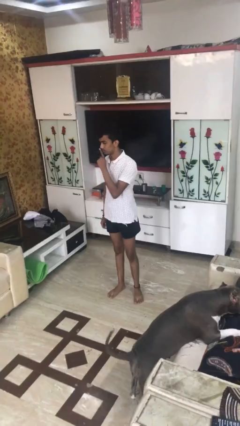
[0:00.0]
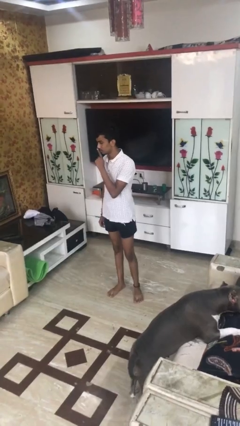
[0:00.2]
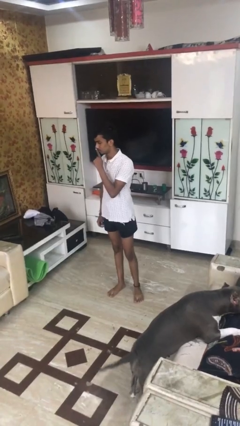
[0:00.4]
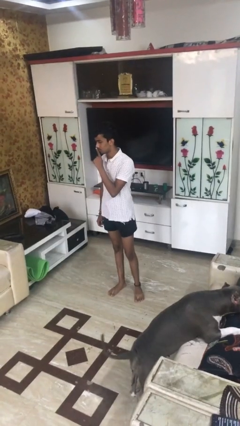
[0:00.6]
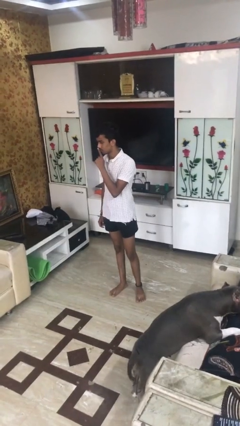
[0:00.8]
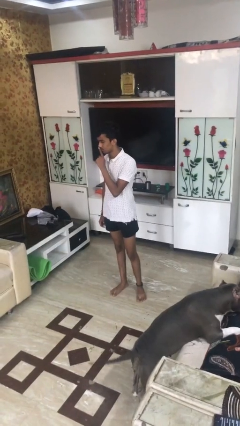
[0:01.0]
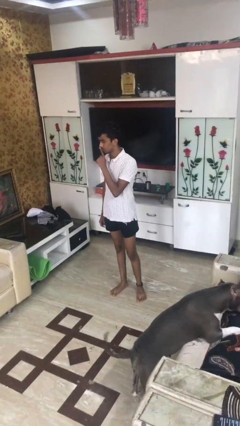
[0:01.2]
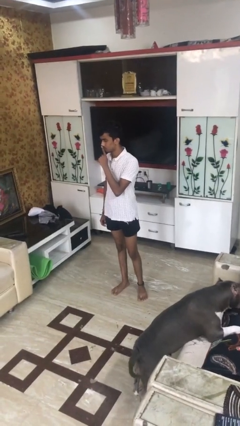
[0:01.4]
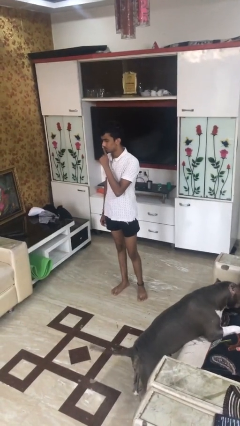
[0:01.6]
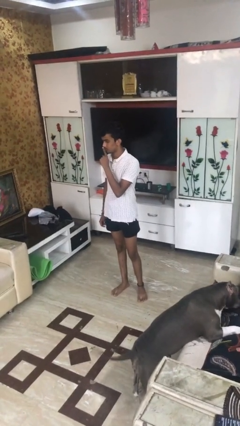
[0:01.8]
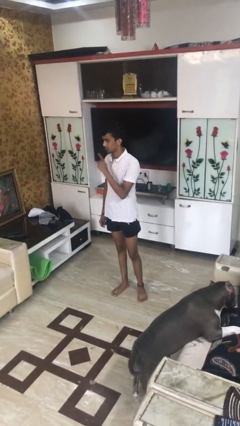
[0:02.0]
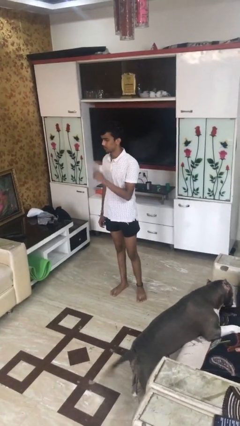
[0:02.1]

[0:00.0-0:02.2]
person gestures be quiet

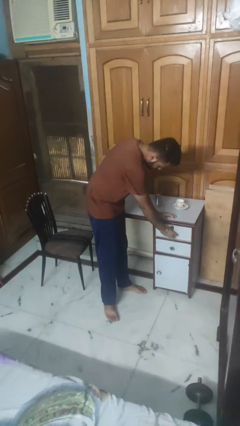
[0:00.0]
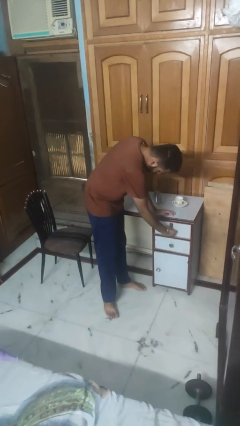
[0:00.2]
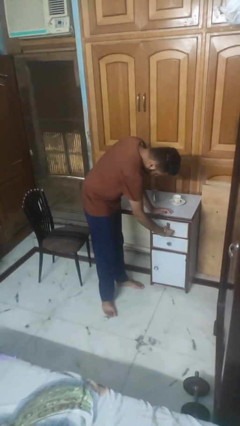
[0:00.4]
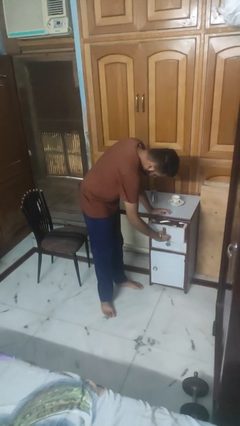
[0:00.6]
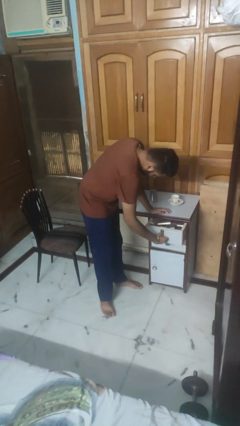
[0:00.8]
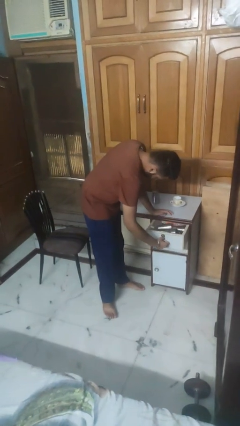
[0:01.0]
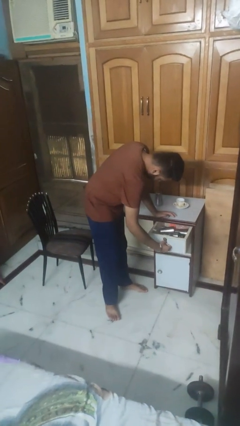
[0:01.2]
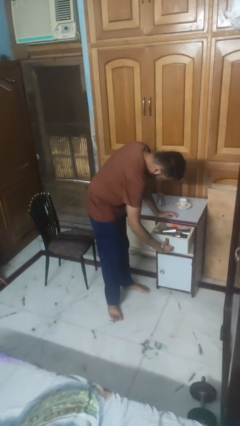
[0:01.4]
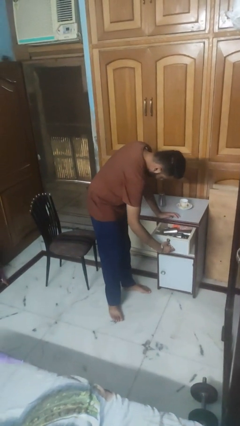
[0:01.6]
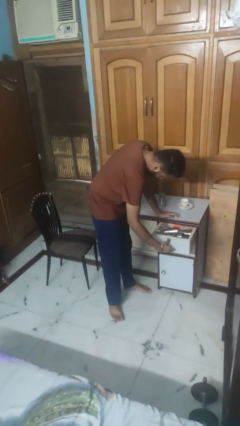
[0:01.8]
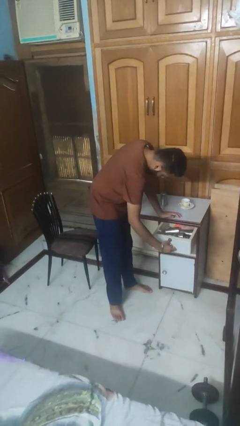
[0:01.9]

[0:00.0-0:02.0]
person opens kitchen drawer

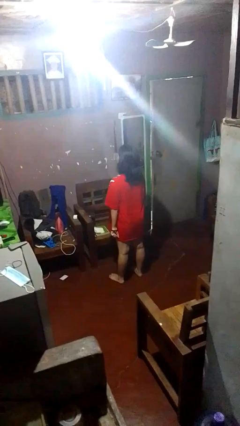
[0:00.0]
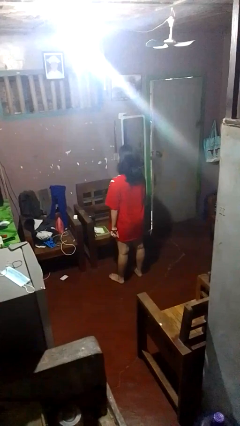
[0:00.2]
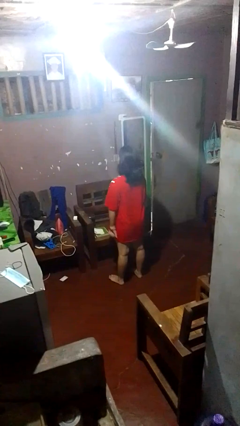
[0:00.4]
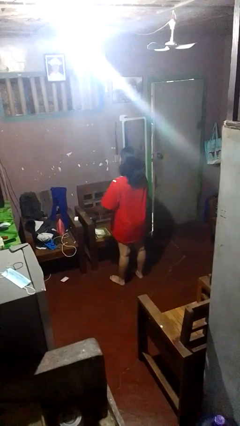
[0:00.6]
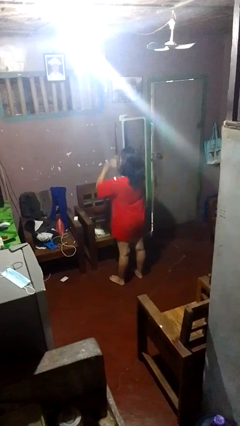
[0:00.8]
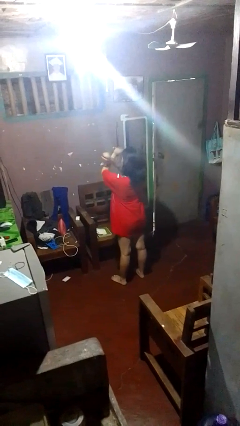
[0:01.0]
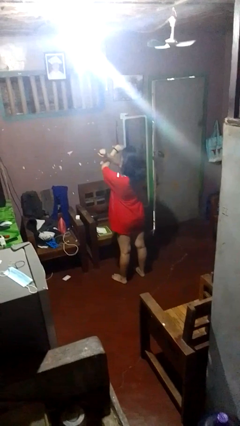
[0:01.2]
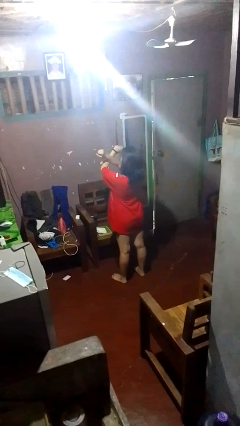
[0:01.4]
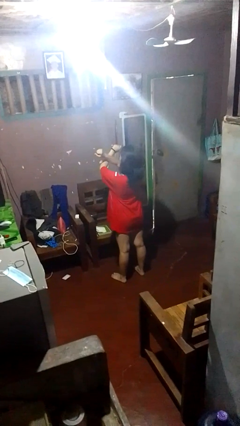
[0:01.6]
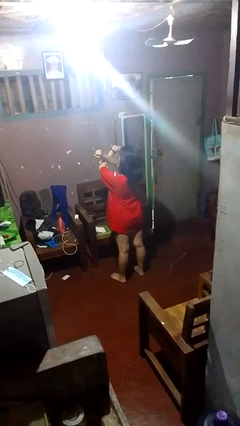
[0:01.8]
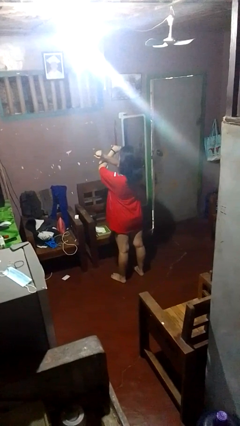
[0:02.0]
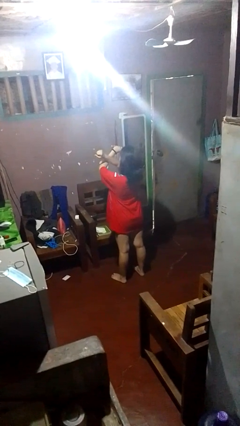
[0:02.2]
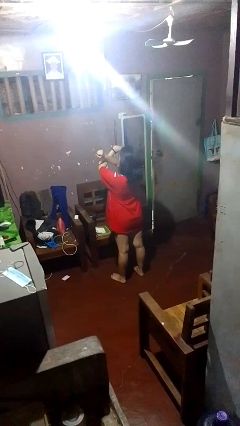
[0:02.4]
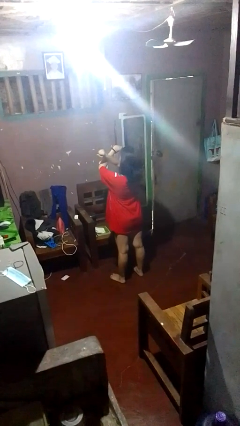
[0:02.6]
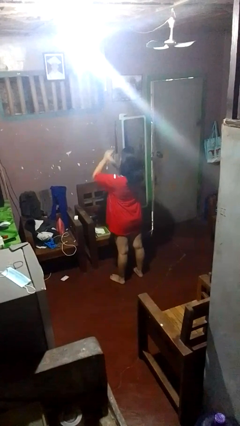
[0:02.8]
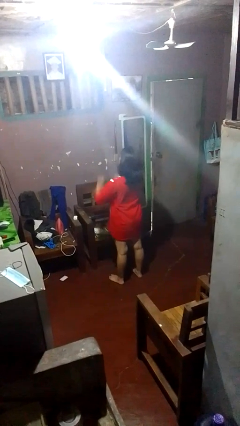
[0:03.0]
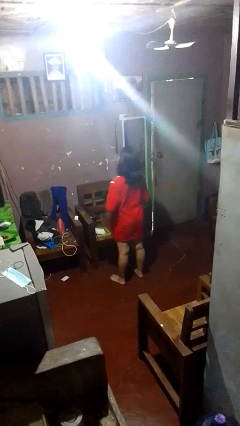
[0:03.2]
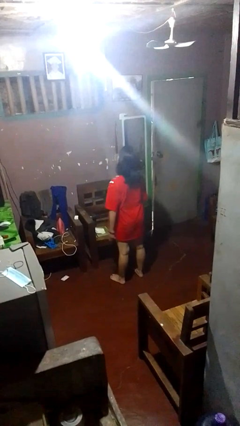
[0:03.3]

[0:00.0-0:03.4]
person gestures arms x

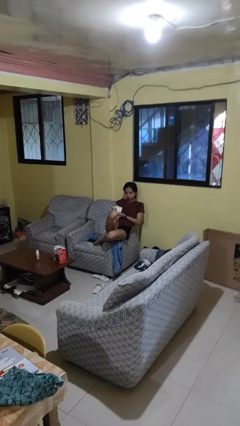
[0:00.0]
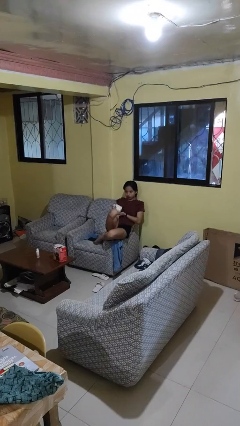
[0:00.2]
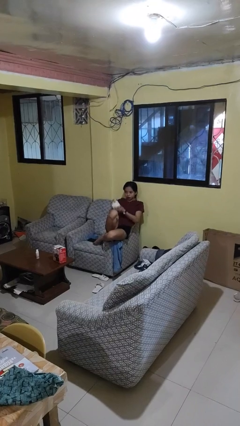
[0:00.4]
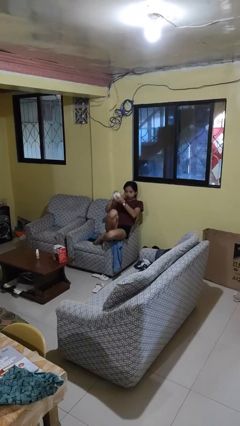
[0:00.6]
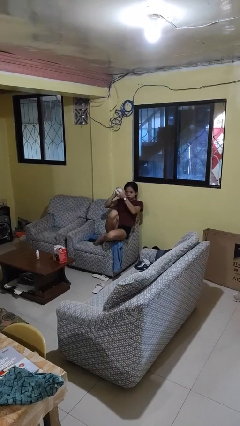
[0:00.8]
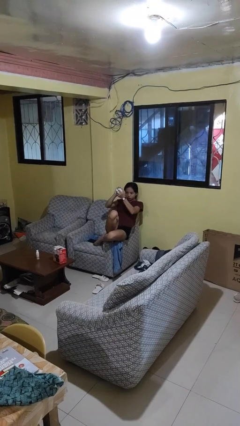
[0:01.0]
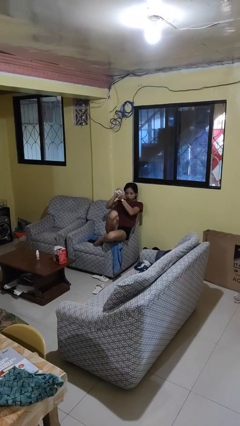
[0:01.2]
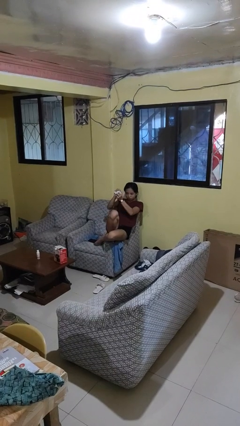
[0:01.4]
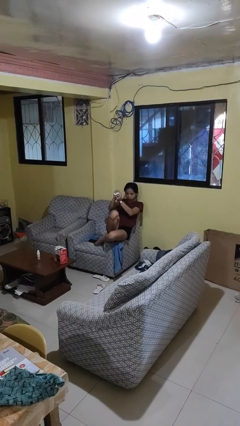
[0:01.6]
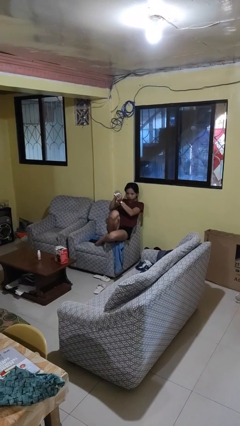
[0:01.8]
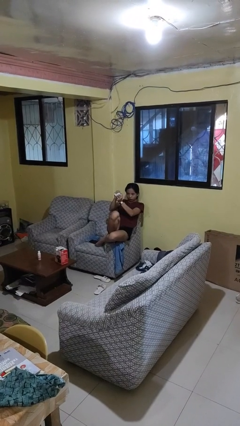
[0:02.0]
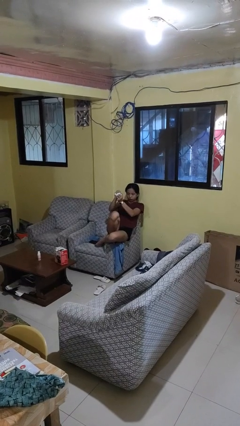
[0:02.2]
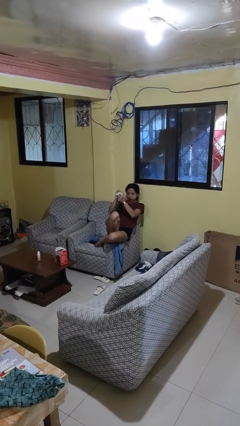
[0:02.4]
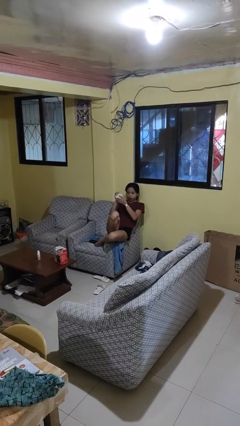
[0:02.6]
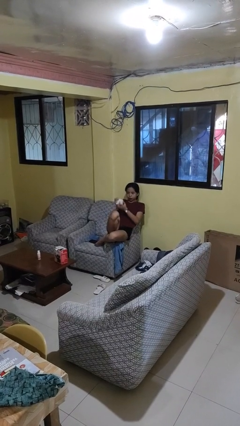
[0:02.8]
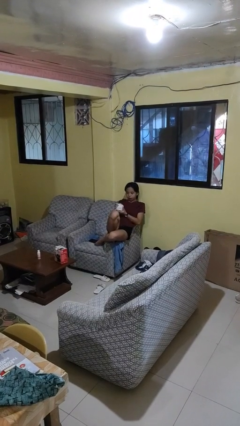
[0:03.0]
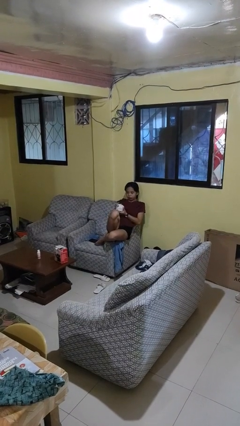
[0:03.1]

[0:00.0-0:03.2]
person squeezes object

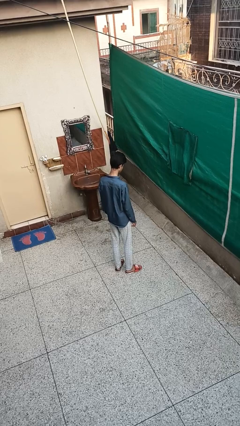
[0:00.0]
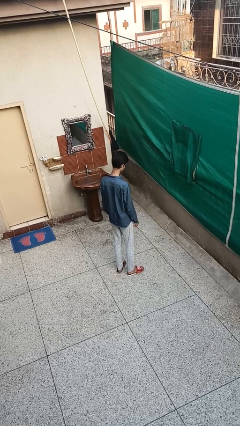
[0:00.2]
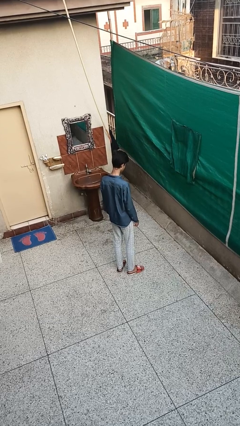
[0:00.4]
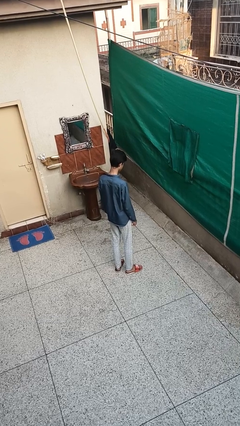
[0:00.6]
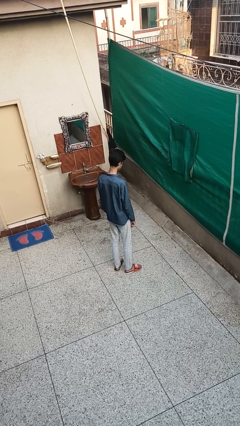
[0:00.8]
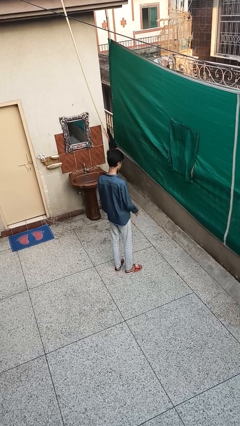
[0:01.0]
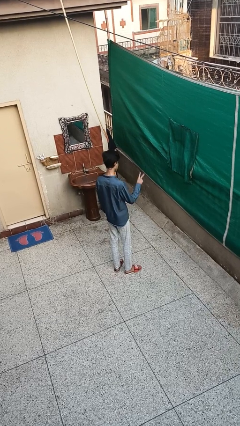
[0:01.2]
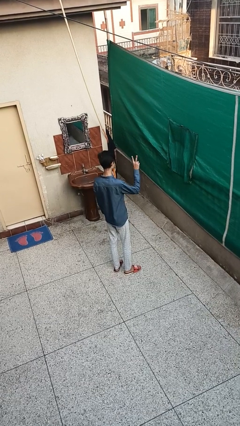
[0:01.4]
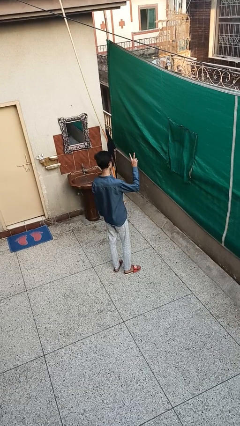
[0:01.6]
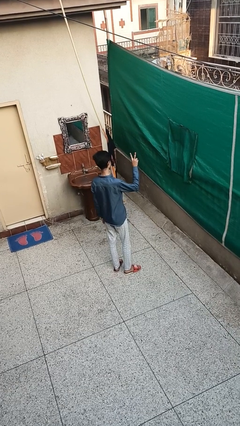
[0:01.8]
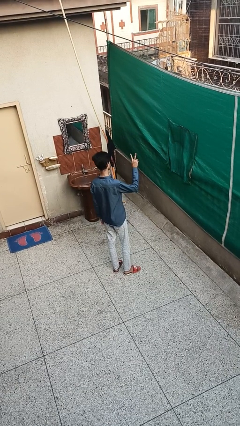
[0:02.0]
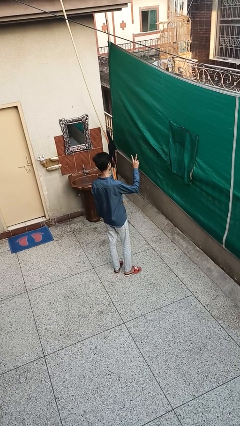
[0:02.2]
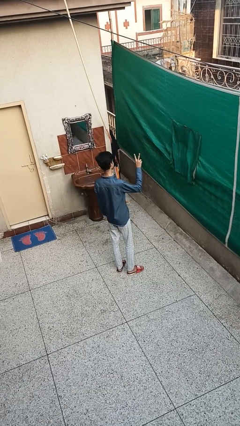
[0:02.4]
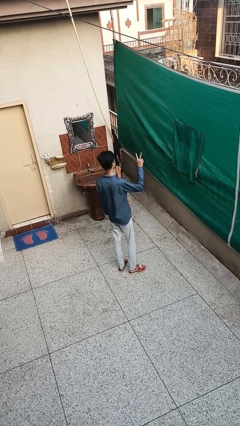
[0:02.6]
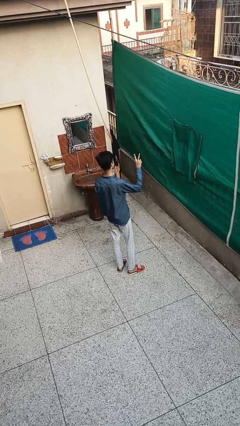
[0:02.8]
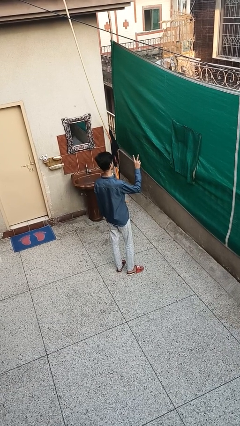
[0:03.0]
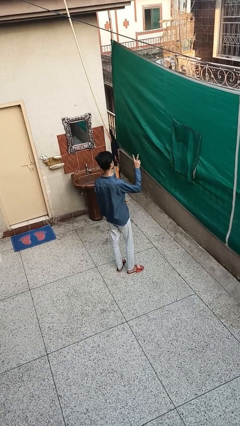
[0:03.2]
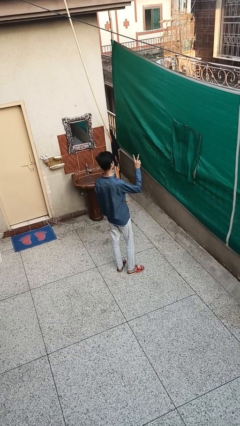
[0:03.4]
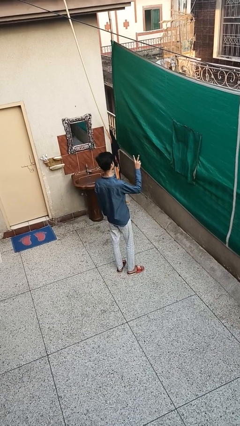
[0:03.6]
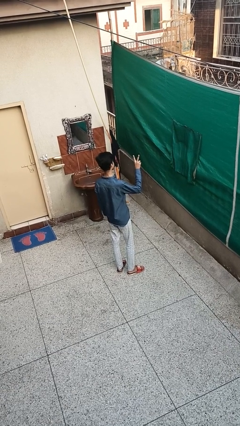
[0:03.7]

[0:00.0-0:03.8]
person gestures peace

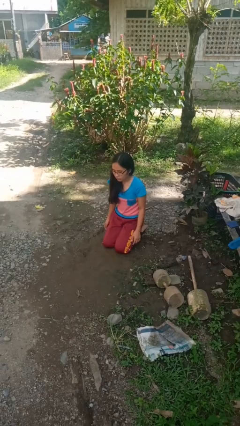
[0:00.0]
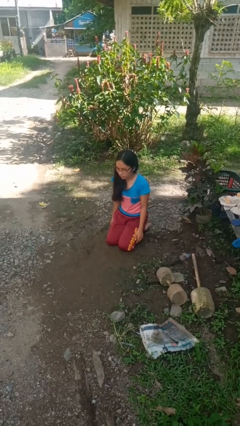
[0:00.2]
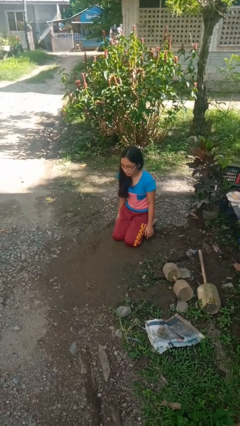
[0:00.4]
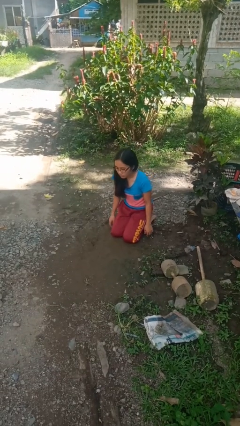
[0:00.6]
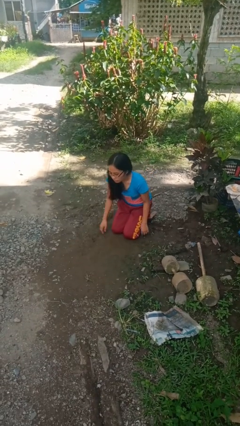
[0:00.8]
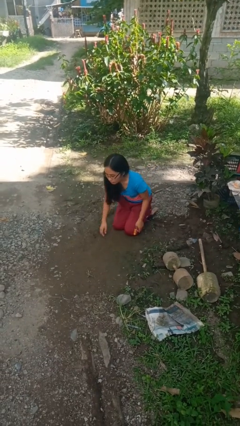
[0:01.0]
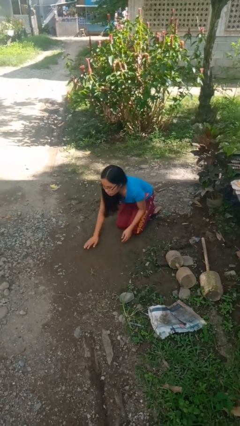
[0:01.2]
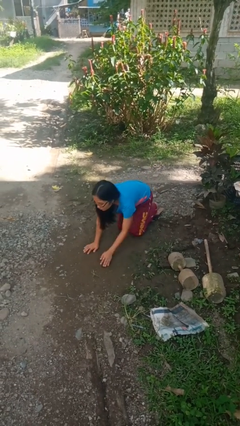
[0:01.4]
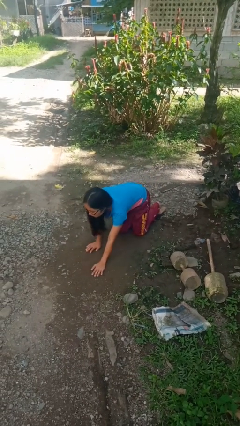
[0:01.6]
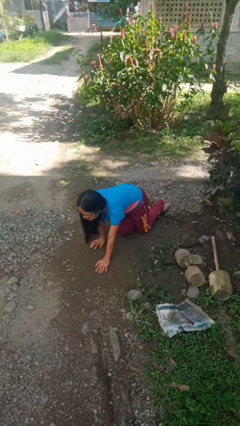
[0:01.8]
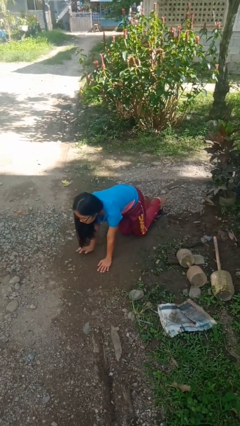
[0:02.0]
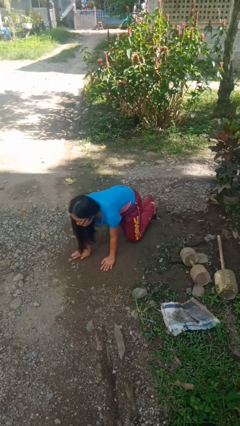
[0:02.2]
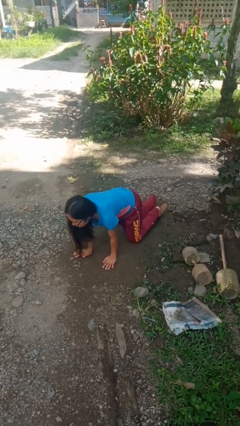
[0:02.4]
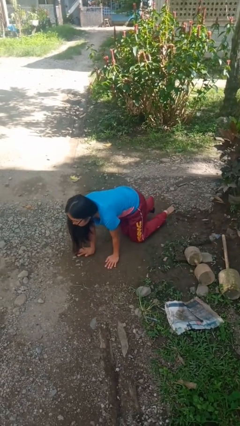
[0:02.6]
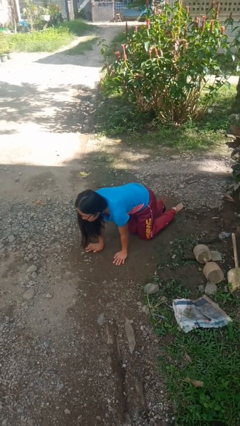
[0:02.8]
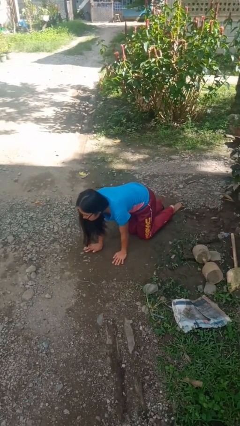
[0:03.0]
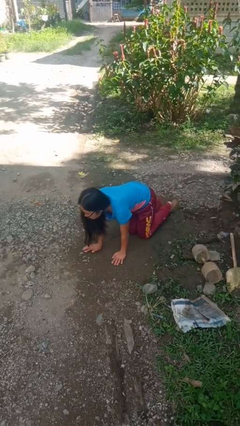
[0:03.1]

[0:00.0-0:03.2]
person crawls
